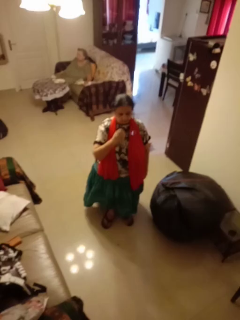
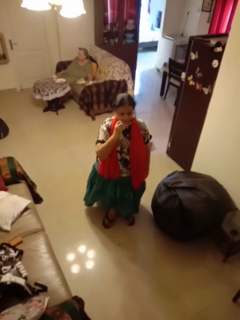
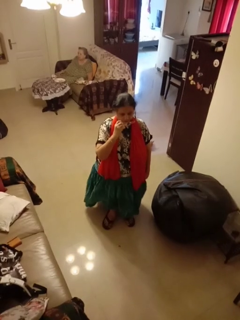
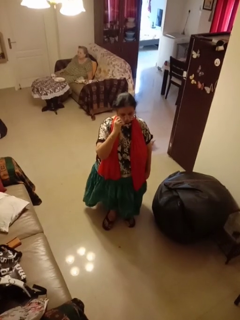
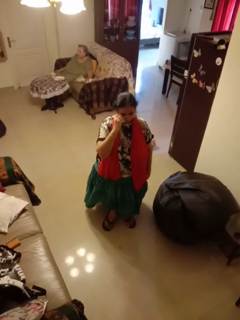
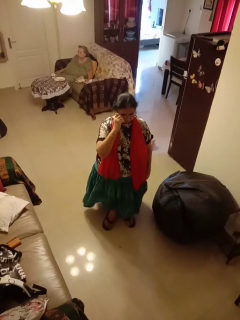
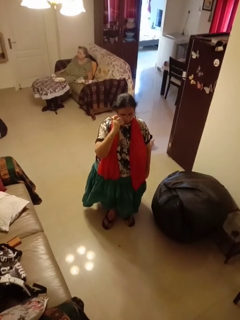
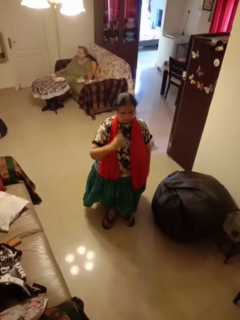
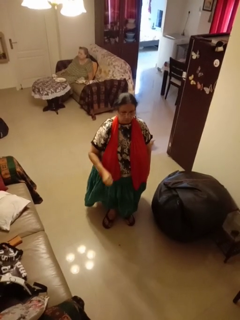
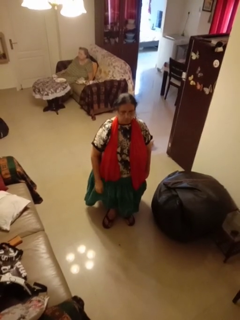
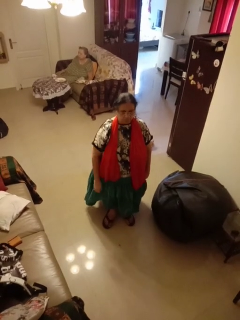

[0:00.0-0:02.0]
person puts on glasses

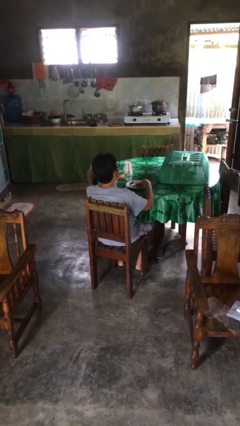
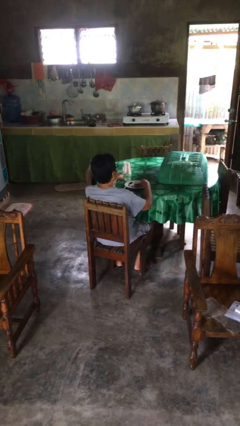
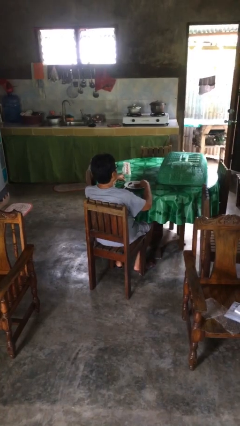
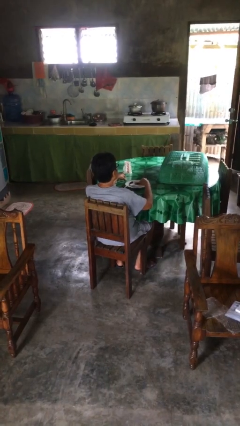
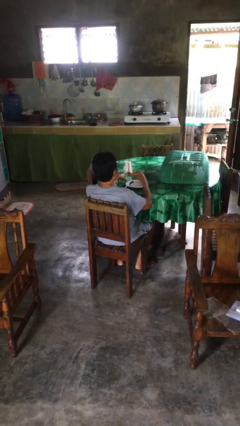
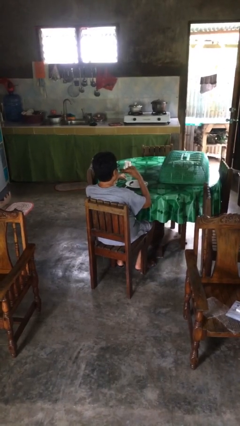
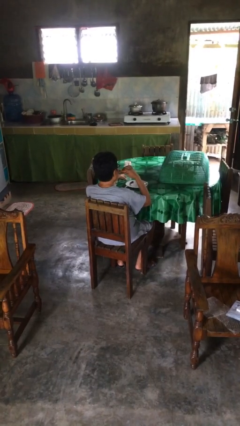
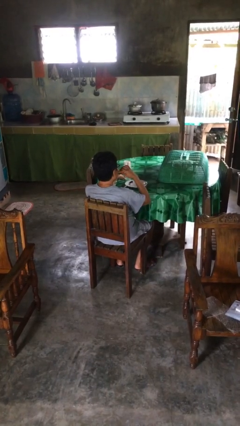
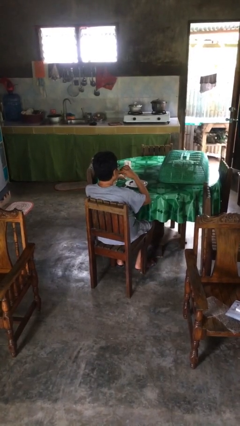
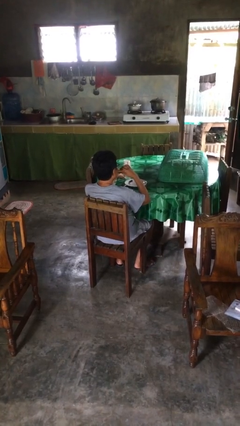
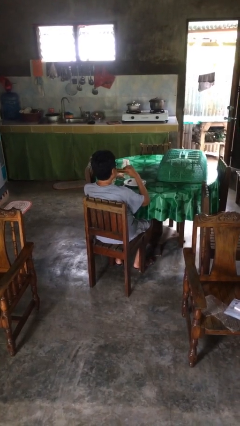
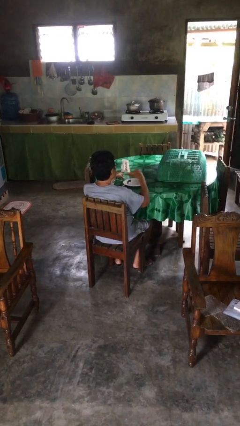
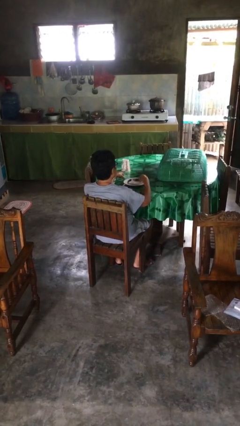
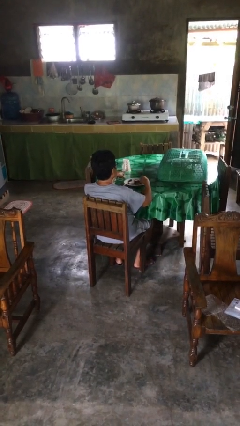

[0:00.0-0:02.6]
person eats with hands

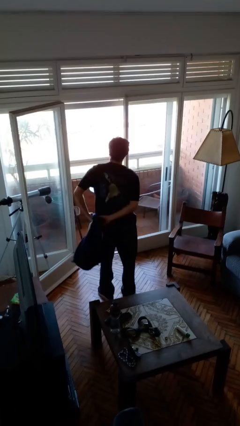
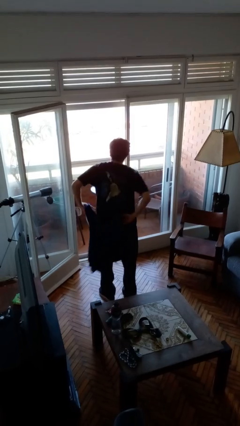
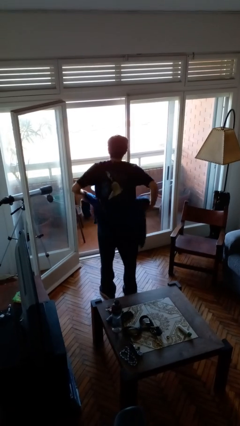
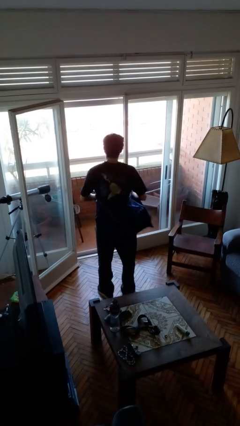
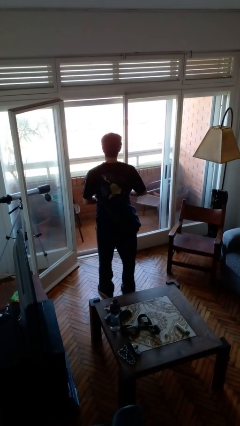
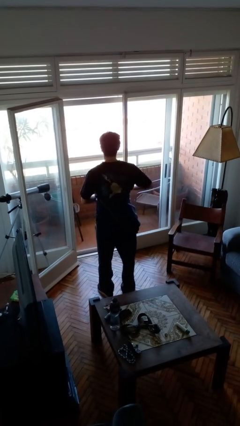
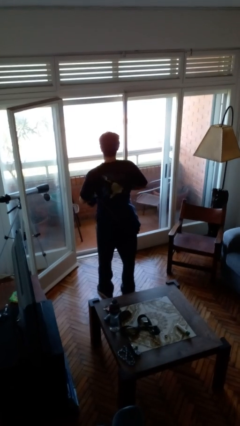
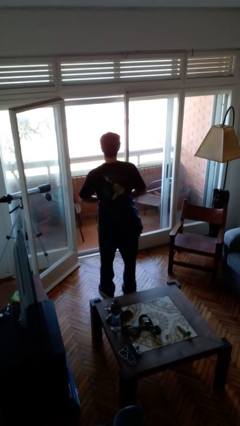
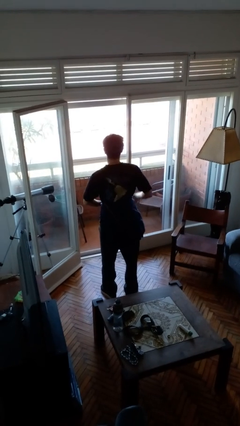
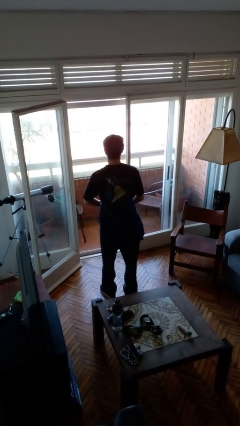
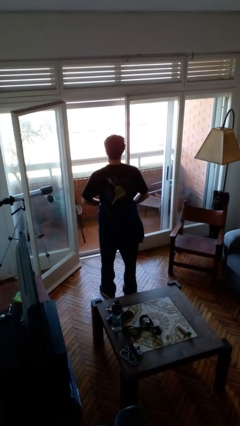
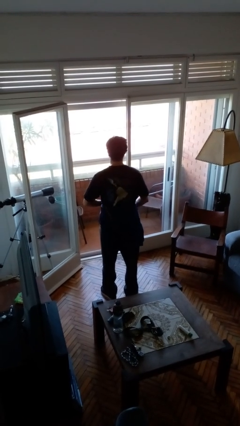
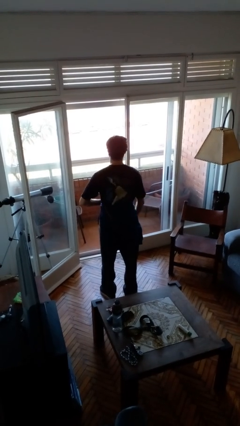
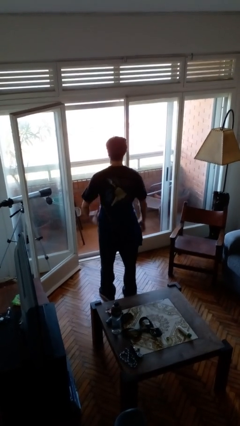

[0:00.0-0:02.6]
person ties jacket around waist

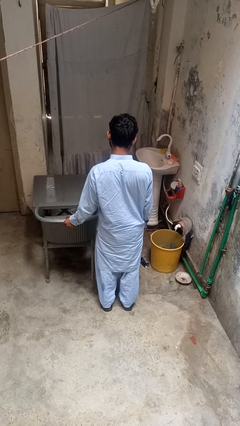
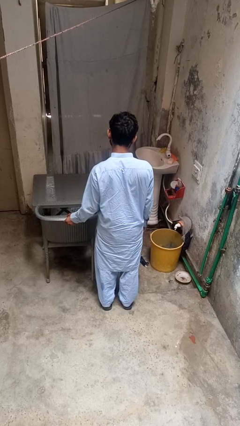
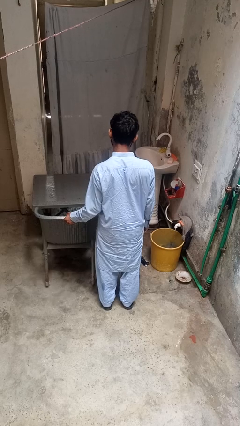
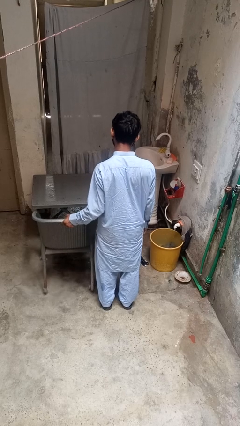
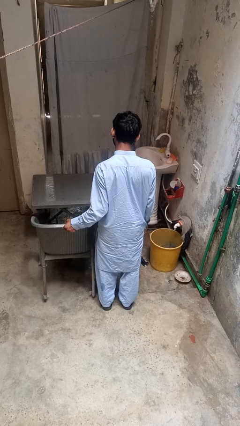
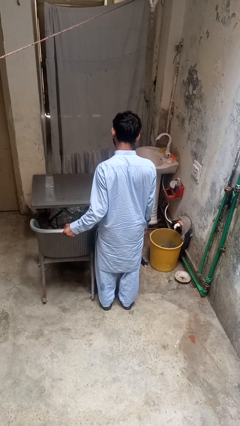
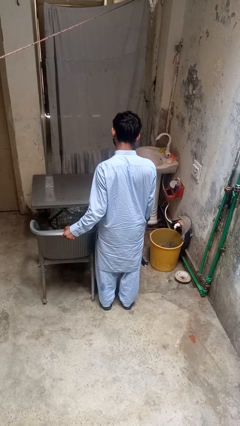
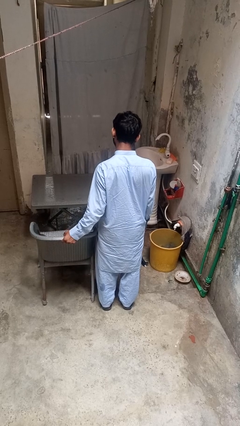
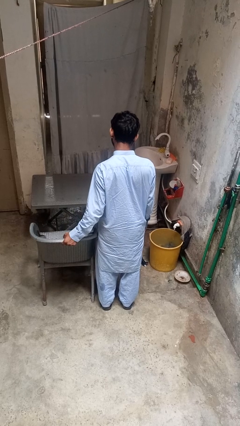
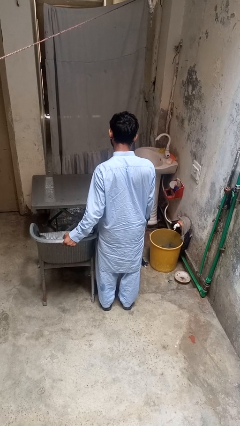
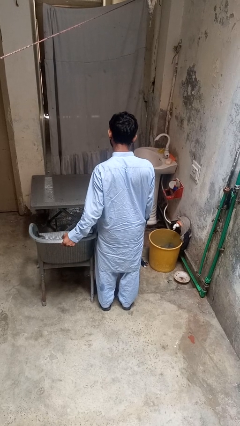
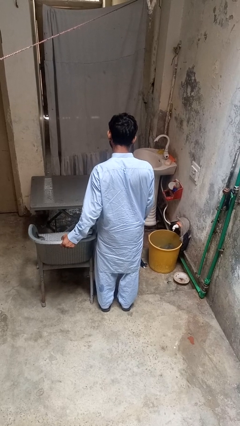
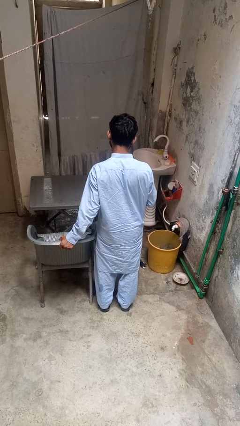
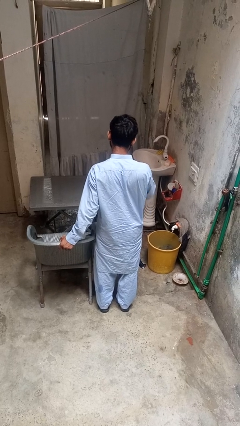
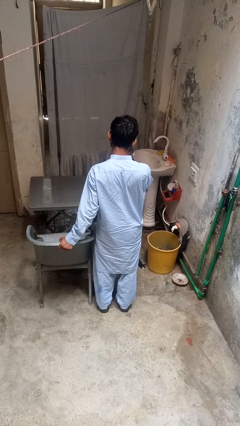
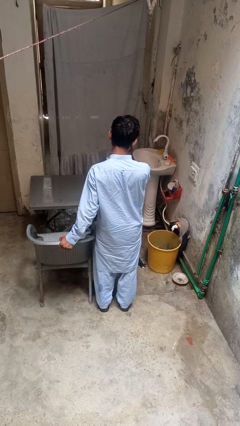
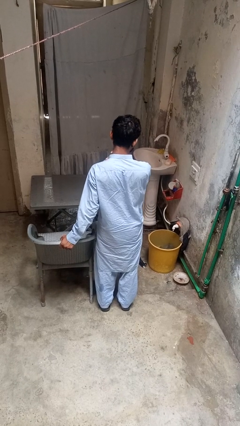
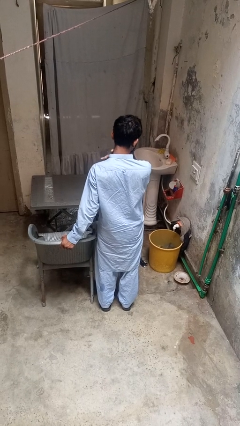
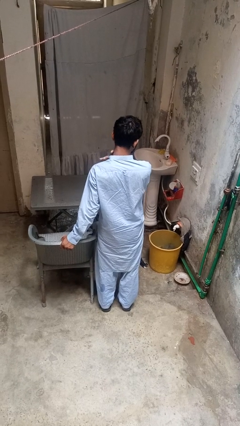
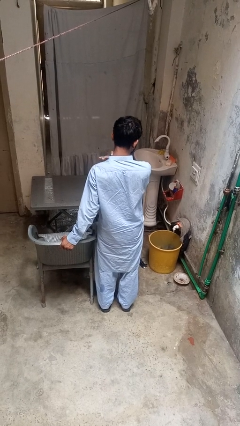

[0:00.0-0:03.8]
person pulls out chair

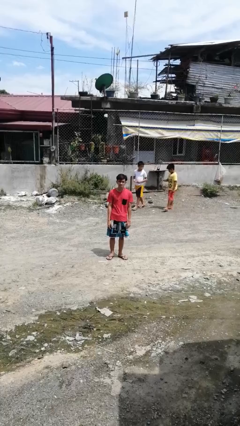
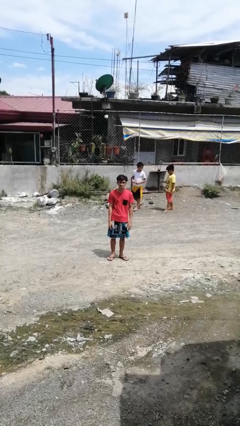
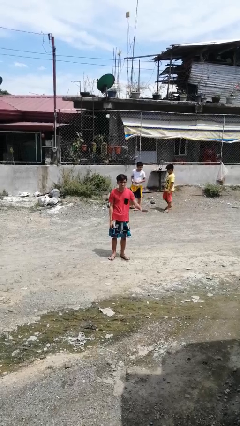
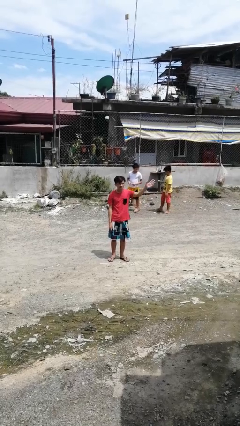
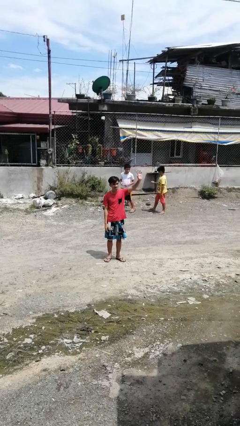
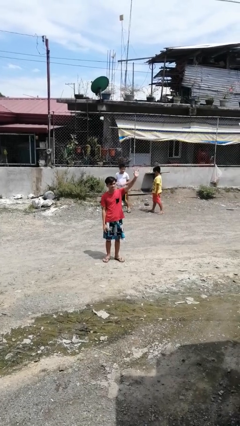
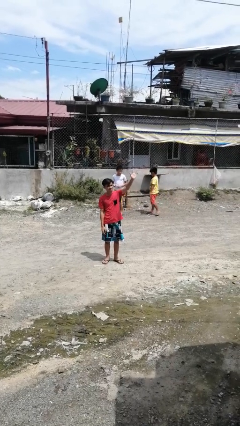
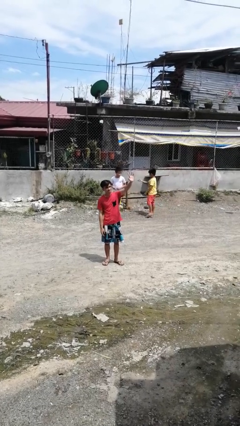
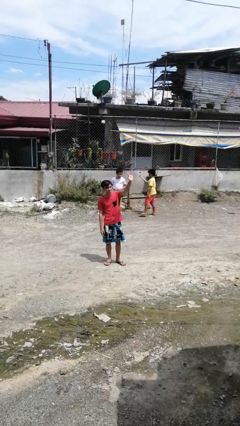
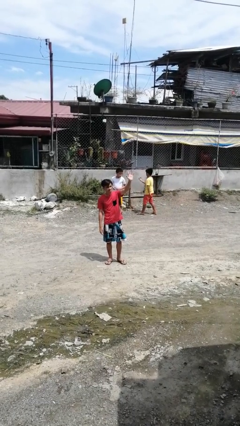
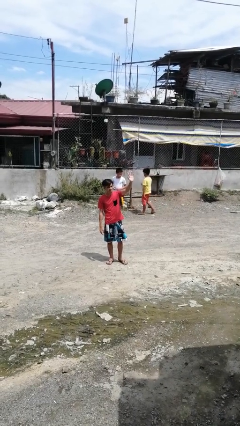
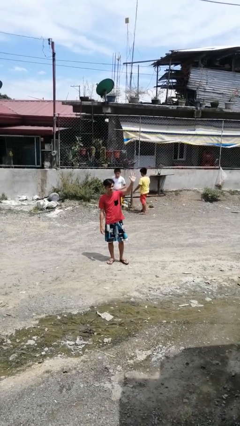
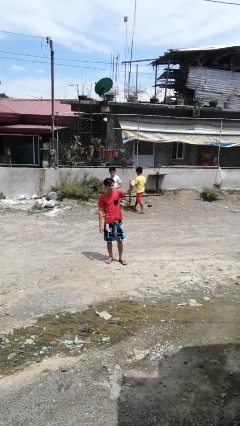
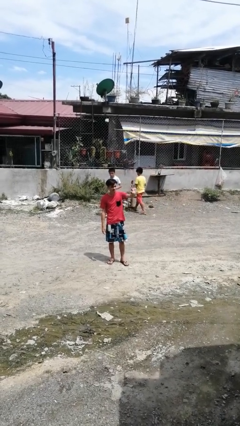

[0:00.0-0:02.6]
person waves at person

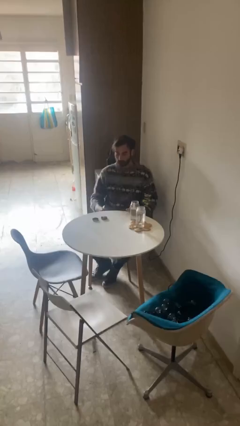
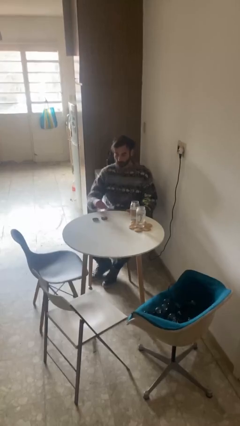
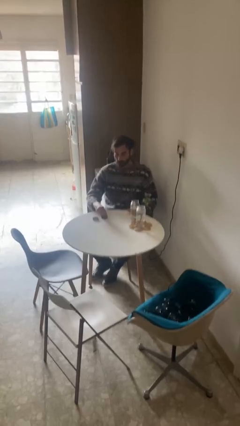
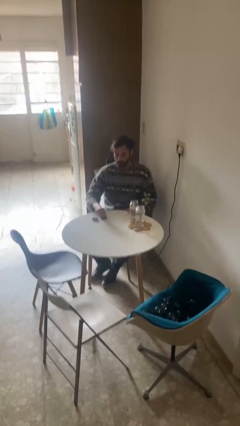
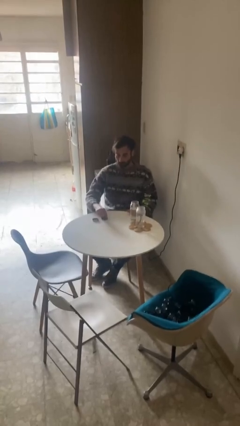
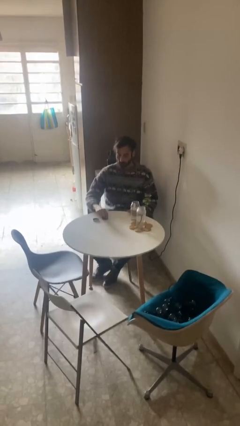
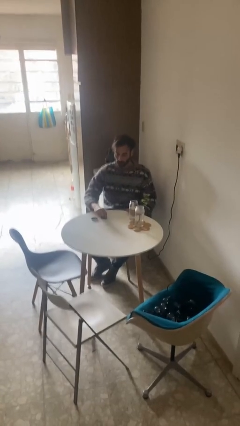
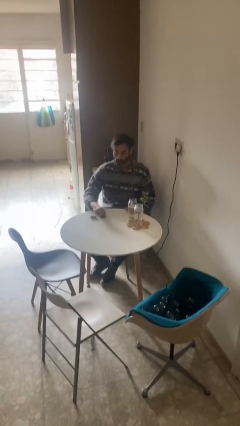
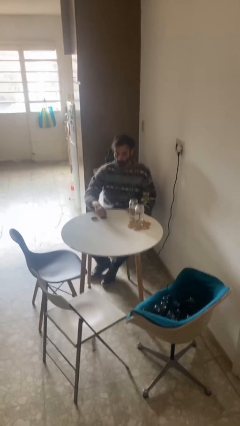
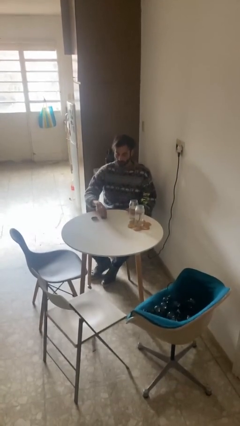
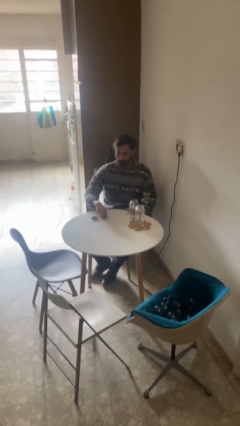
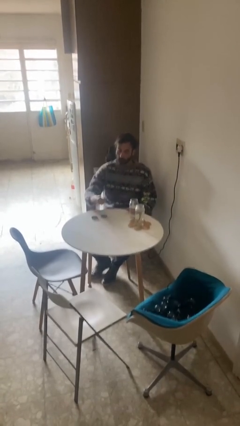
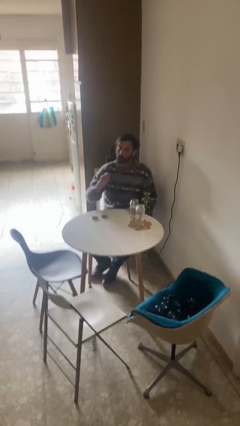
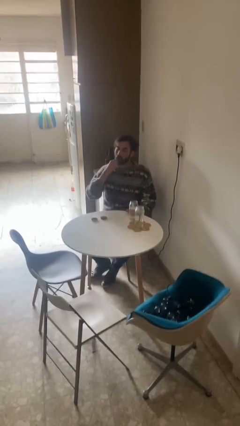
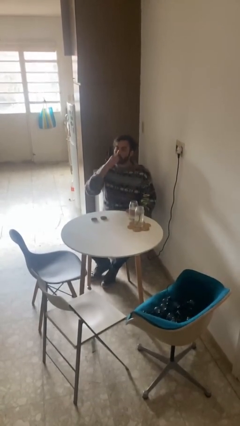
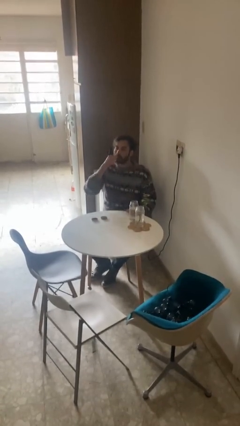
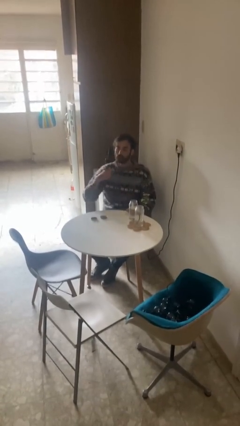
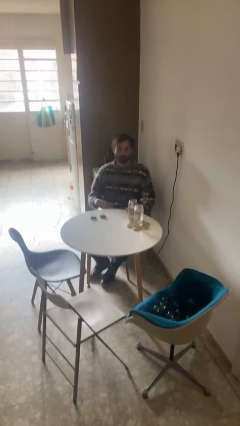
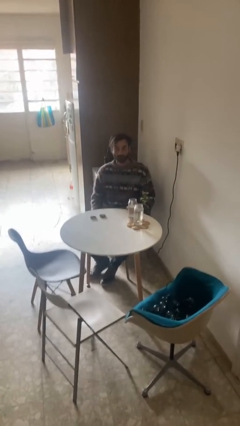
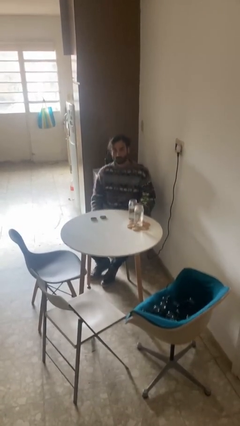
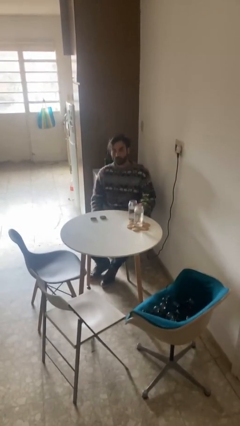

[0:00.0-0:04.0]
person takes medicine pills

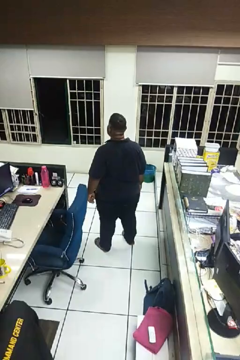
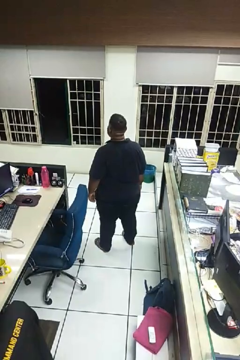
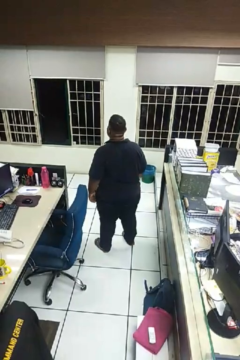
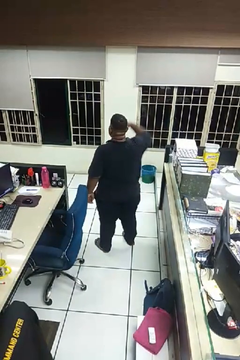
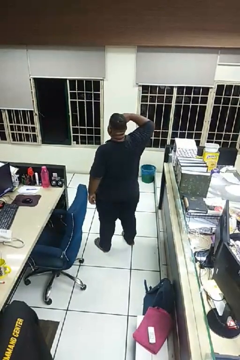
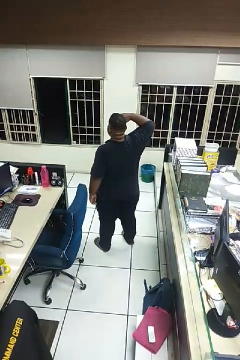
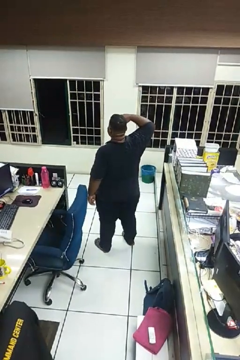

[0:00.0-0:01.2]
person salutes
